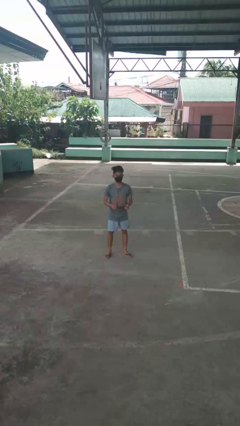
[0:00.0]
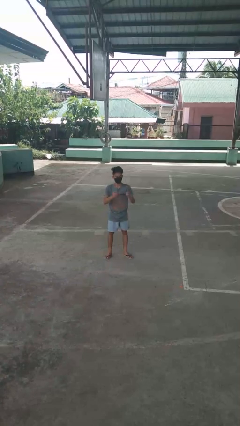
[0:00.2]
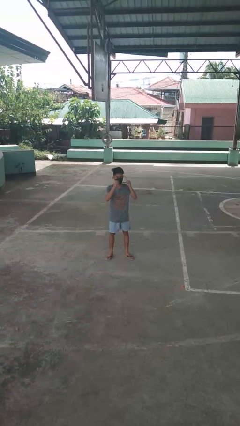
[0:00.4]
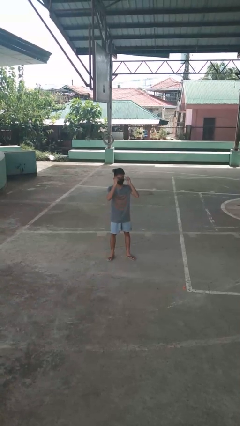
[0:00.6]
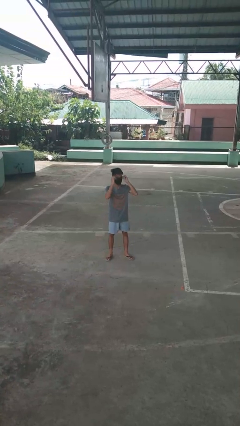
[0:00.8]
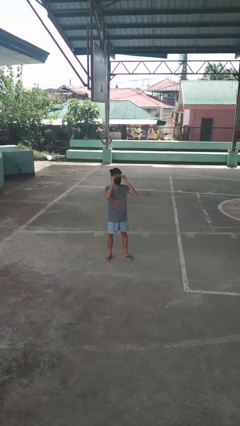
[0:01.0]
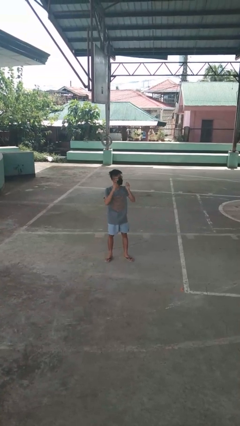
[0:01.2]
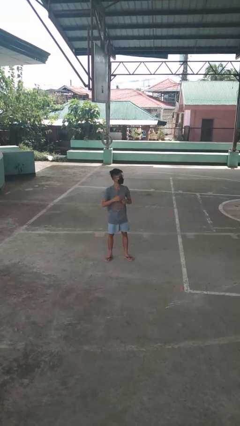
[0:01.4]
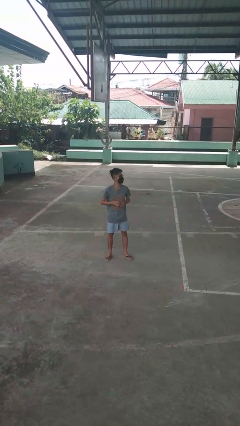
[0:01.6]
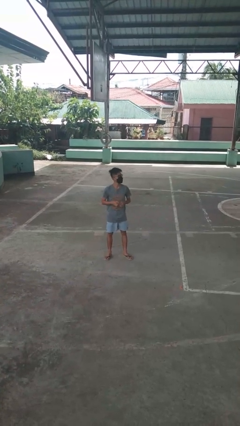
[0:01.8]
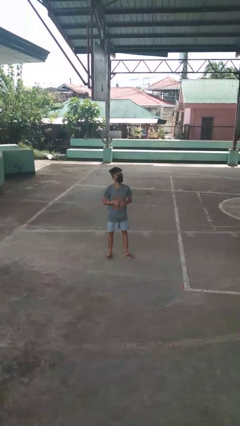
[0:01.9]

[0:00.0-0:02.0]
person puts on glasses

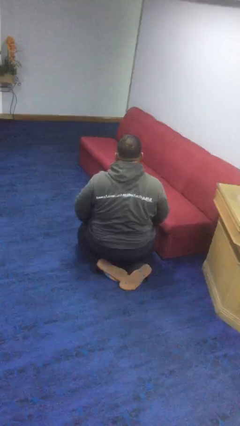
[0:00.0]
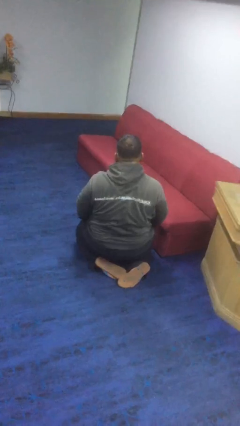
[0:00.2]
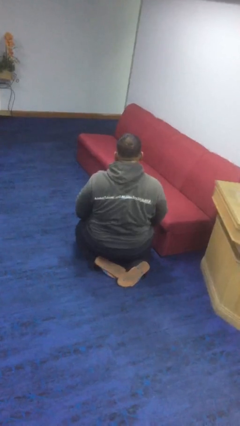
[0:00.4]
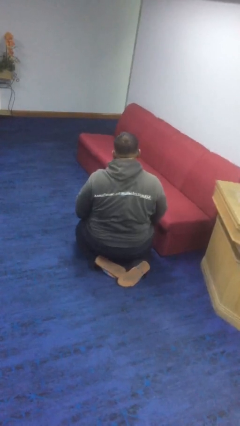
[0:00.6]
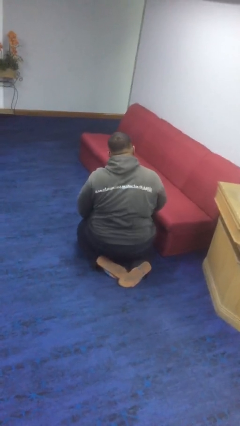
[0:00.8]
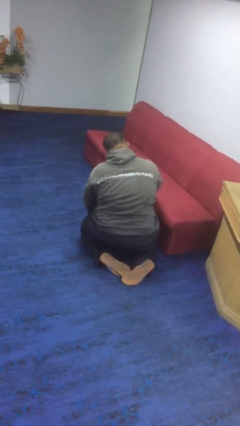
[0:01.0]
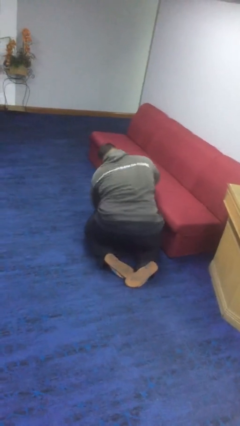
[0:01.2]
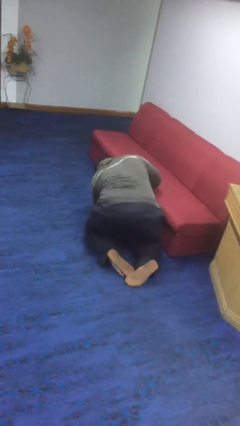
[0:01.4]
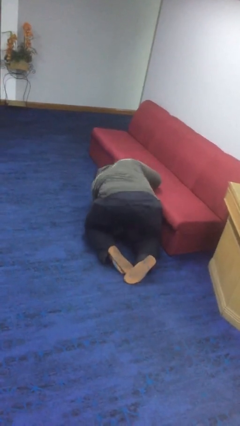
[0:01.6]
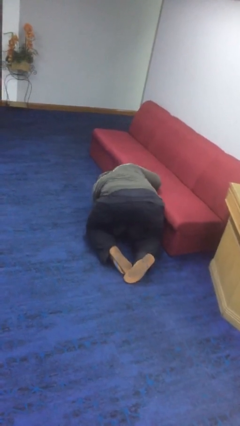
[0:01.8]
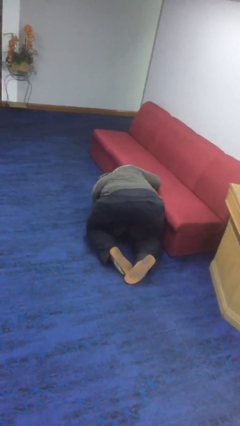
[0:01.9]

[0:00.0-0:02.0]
person searches under couch

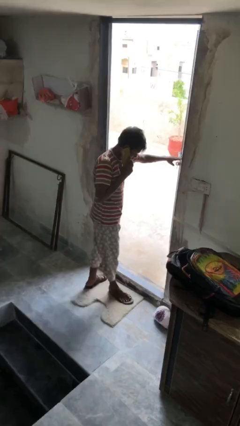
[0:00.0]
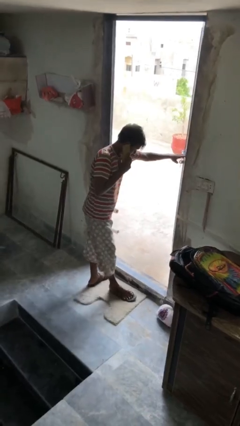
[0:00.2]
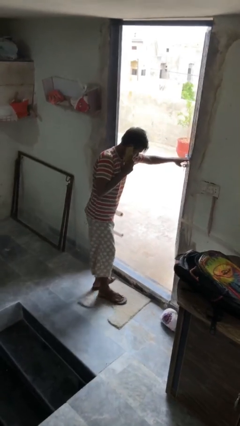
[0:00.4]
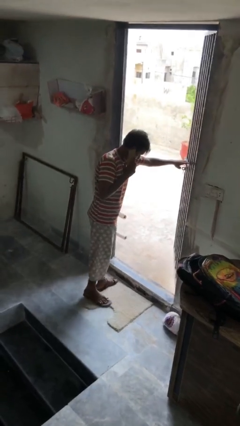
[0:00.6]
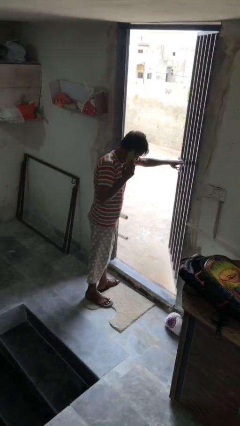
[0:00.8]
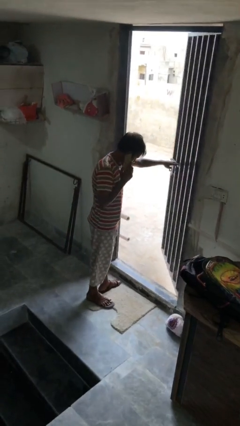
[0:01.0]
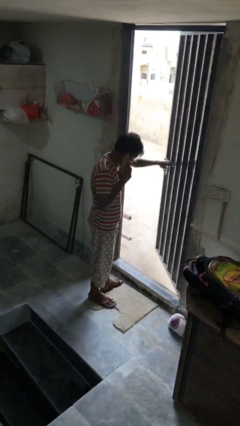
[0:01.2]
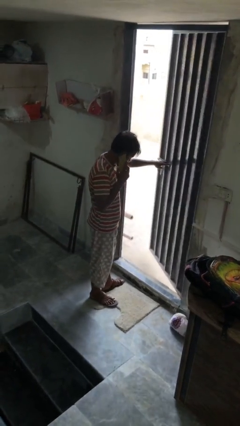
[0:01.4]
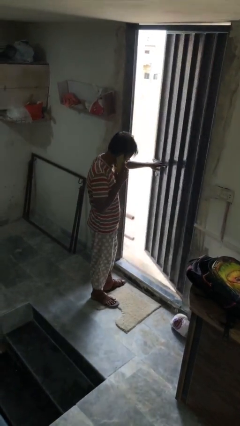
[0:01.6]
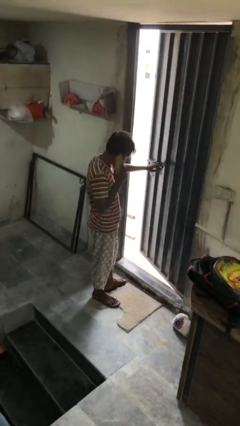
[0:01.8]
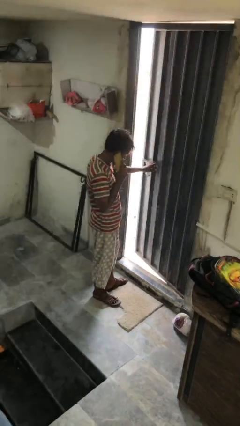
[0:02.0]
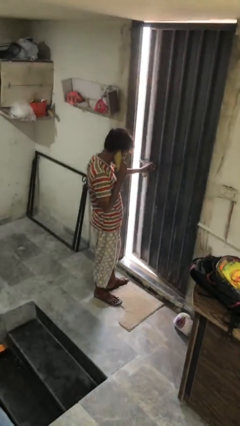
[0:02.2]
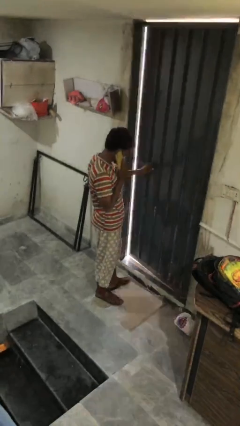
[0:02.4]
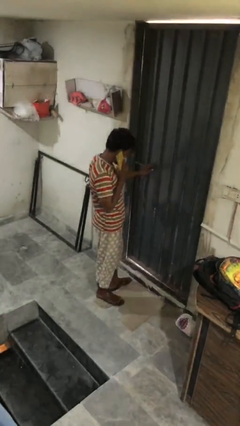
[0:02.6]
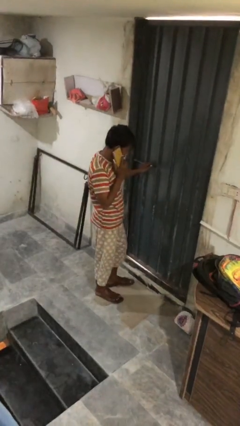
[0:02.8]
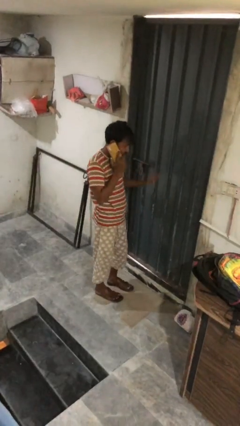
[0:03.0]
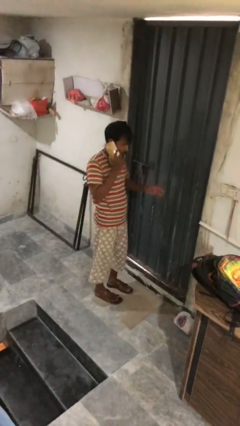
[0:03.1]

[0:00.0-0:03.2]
person closes facility door

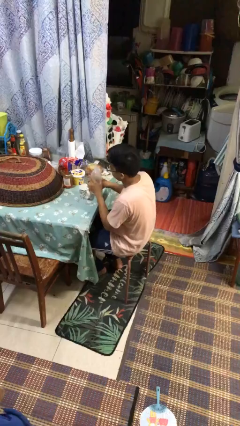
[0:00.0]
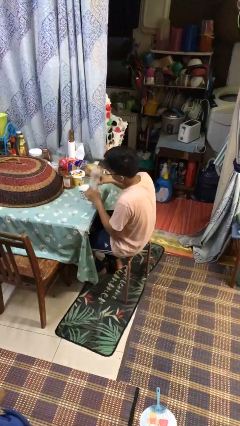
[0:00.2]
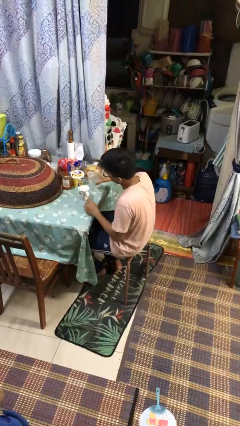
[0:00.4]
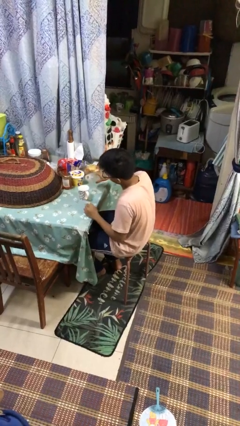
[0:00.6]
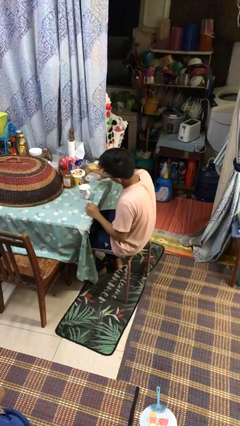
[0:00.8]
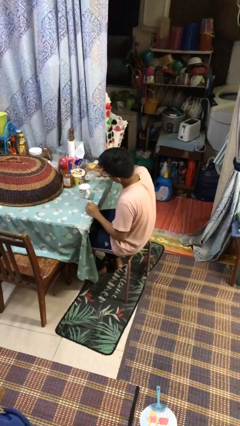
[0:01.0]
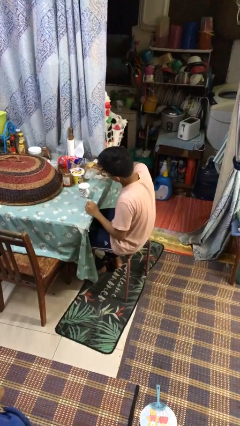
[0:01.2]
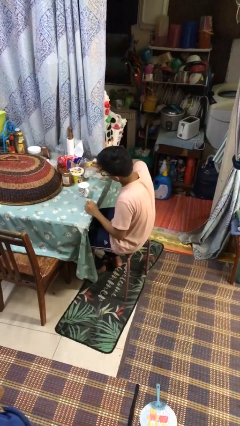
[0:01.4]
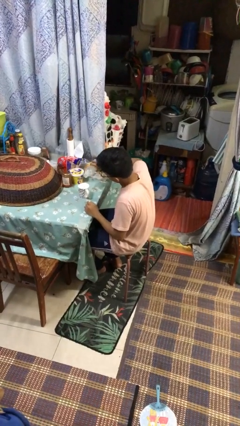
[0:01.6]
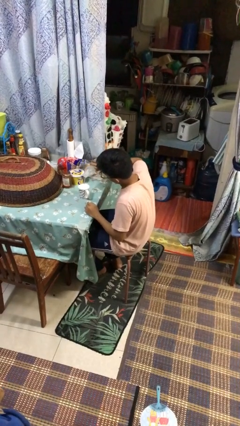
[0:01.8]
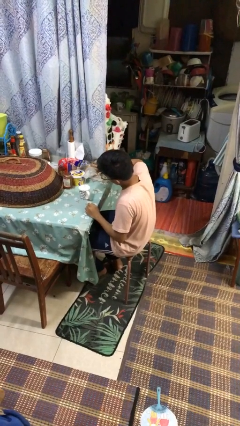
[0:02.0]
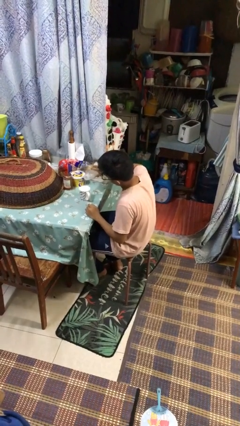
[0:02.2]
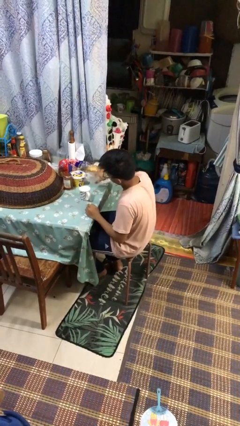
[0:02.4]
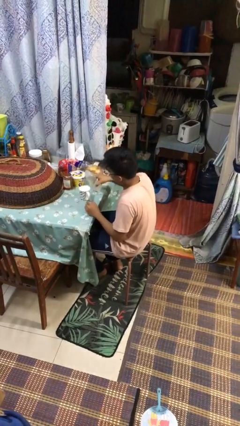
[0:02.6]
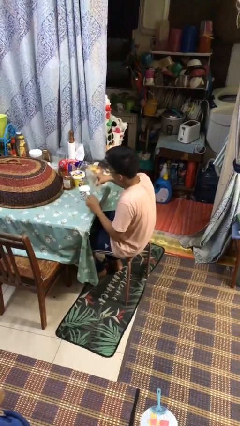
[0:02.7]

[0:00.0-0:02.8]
person pours liquid into cup

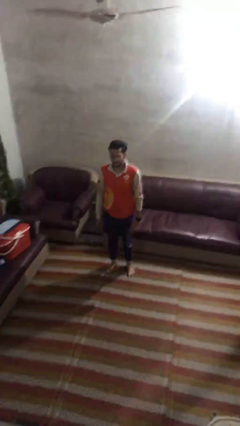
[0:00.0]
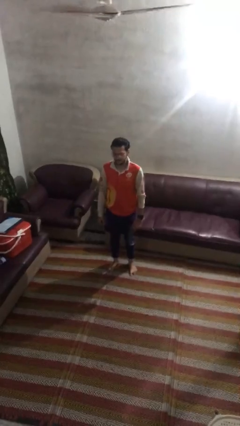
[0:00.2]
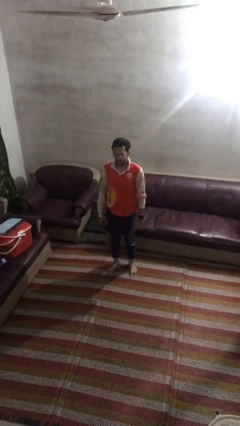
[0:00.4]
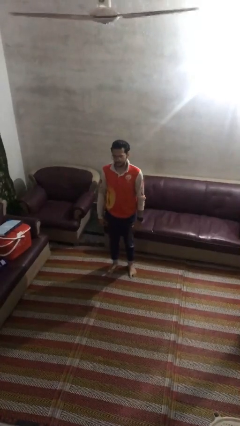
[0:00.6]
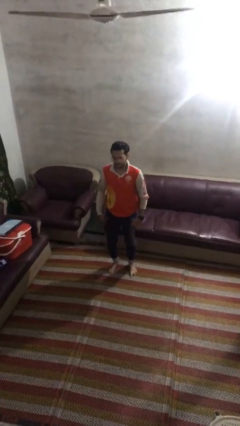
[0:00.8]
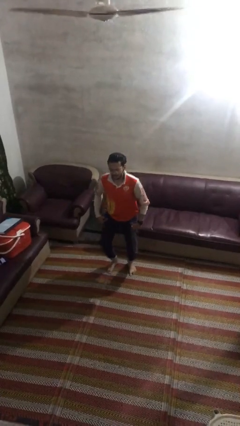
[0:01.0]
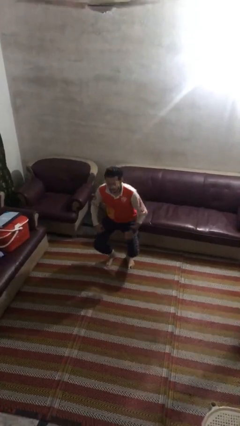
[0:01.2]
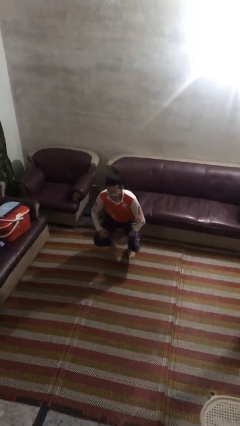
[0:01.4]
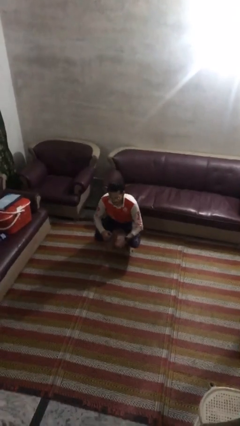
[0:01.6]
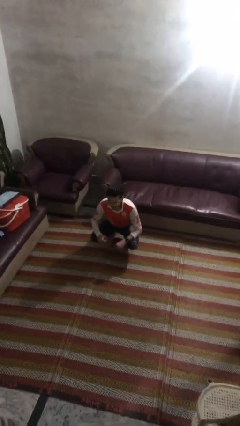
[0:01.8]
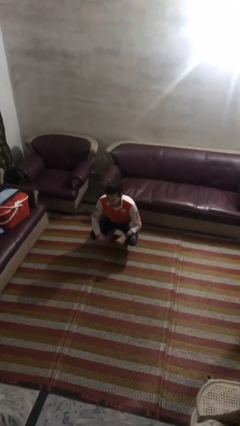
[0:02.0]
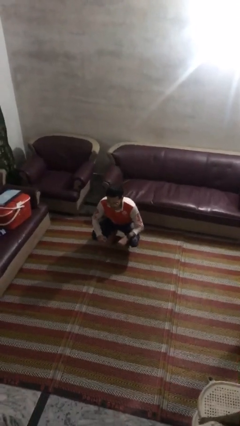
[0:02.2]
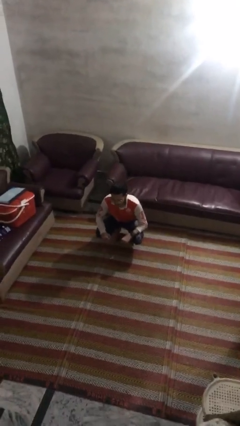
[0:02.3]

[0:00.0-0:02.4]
person squats

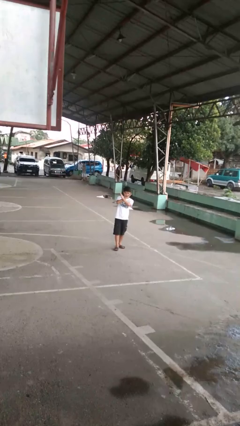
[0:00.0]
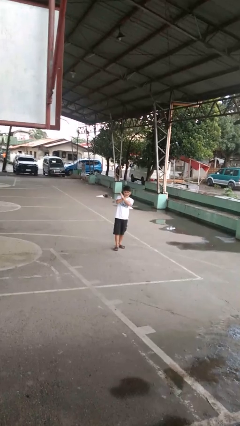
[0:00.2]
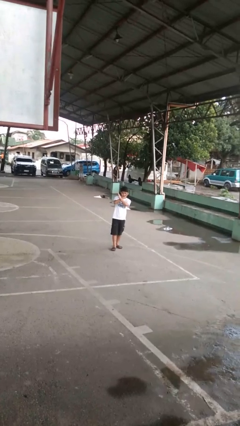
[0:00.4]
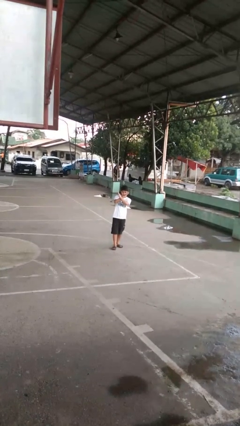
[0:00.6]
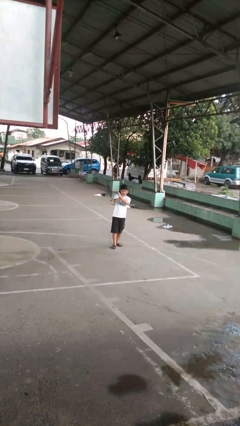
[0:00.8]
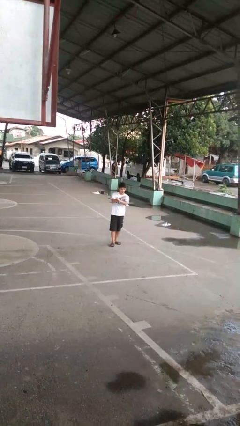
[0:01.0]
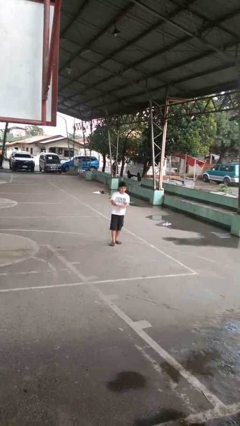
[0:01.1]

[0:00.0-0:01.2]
person gestures arms x

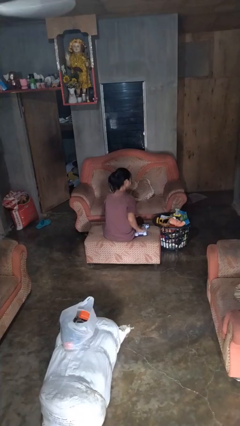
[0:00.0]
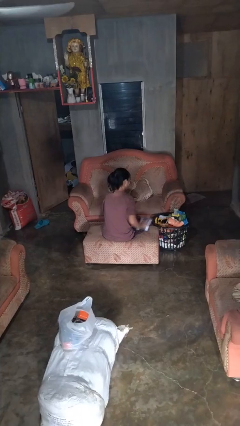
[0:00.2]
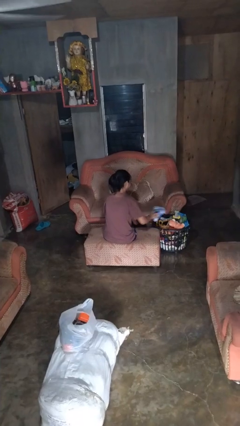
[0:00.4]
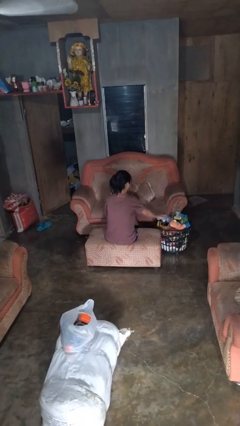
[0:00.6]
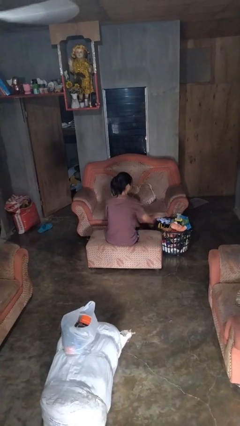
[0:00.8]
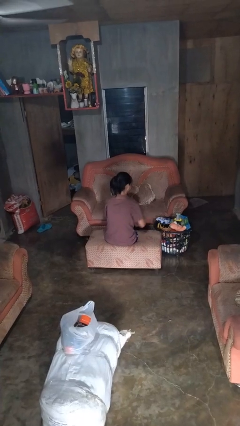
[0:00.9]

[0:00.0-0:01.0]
person puts object into basket

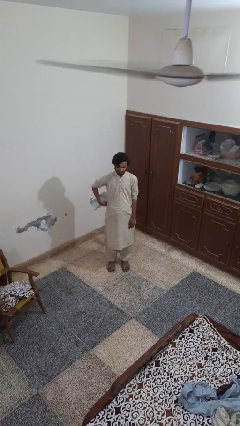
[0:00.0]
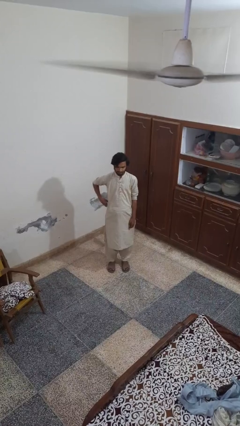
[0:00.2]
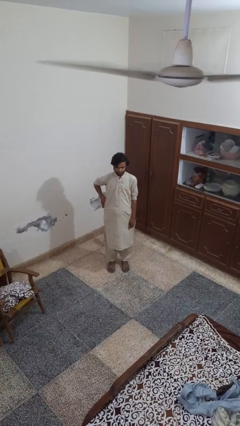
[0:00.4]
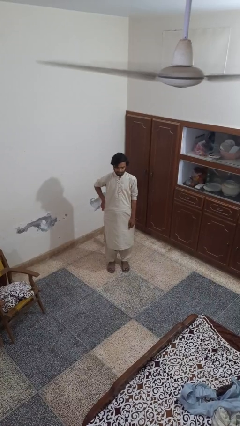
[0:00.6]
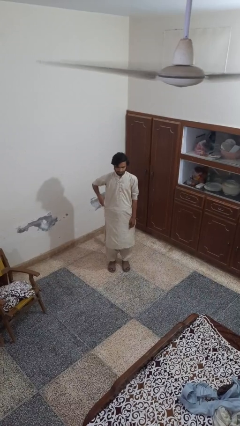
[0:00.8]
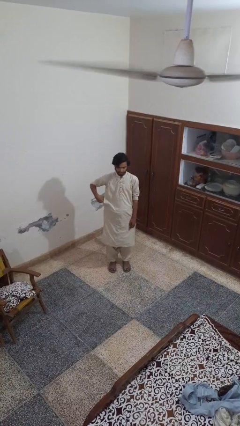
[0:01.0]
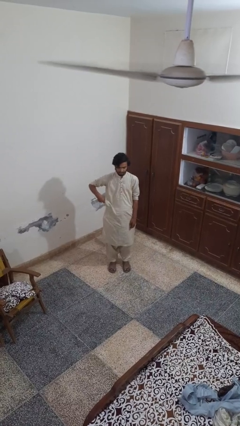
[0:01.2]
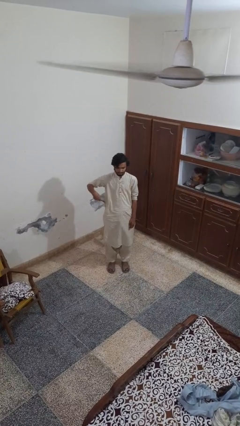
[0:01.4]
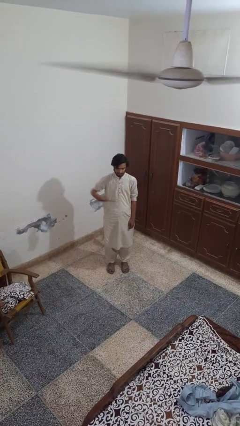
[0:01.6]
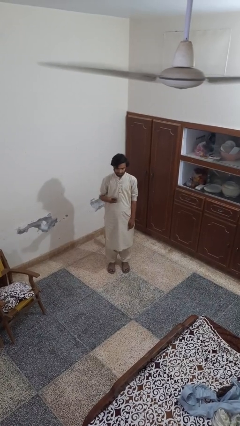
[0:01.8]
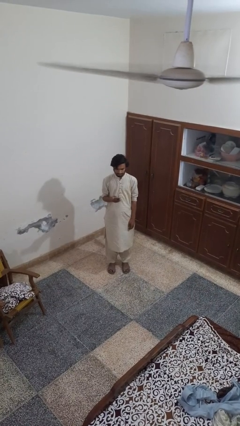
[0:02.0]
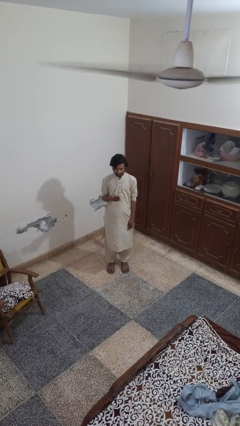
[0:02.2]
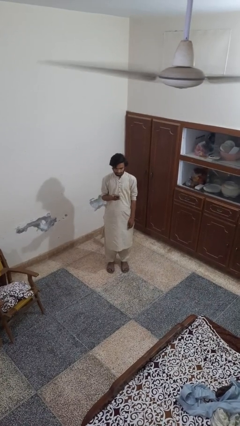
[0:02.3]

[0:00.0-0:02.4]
person takes phone from pocket
